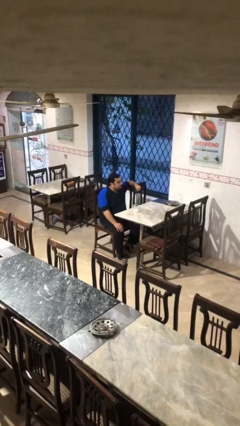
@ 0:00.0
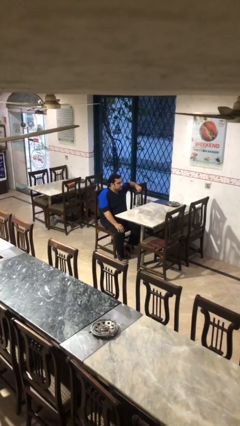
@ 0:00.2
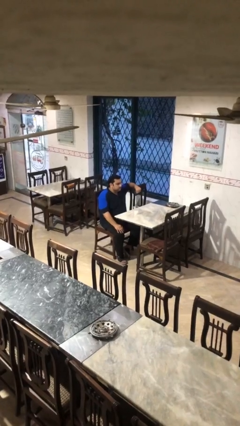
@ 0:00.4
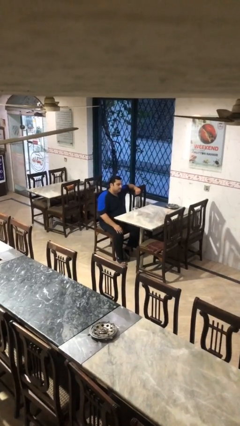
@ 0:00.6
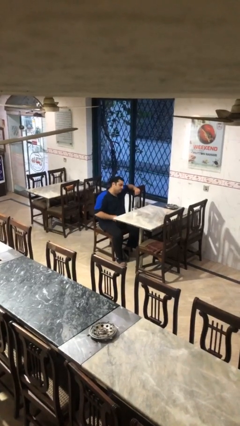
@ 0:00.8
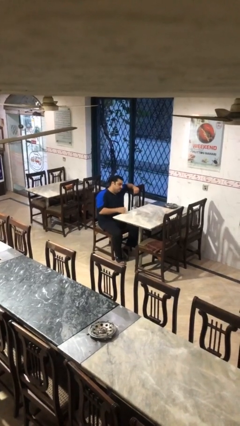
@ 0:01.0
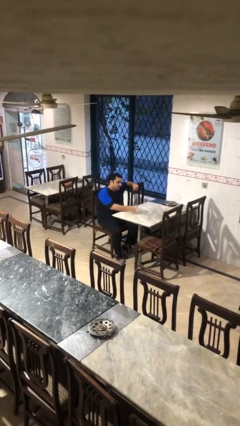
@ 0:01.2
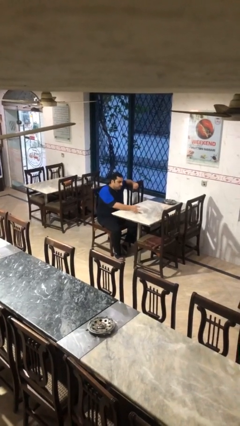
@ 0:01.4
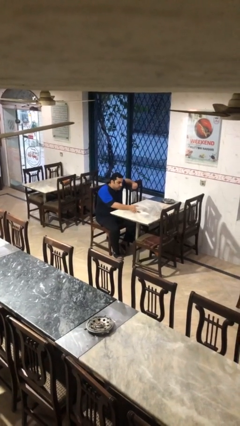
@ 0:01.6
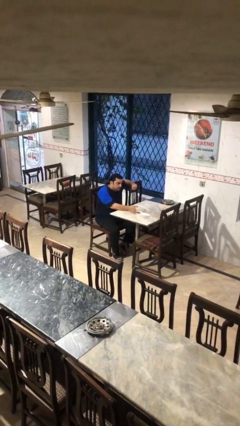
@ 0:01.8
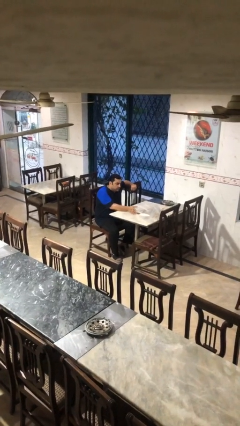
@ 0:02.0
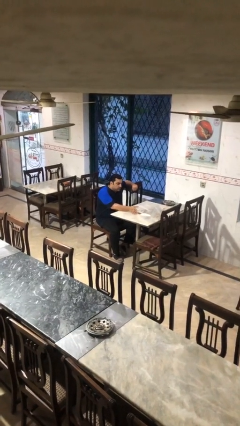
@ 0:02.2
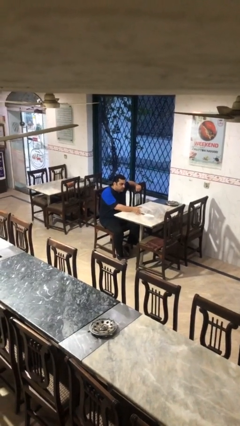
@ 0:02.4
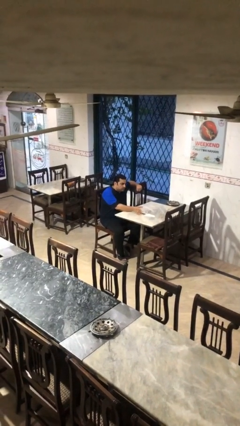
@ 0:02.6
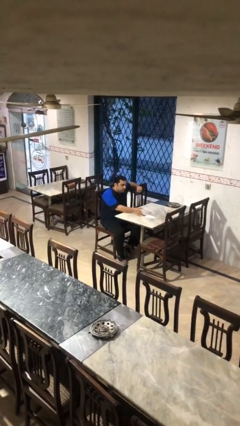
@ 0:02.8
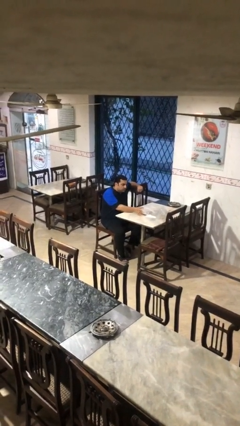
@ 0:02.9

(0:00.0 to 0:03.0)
person spills on table

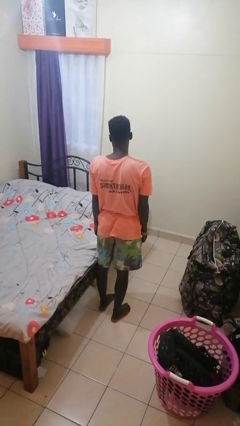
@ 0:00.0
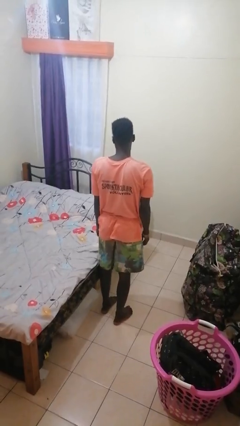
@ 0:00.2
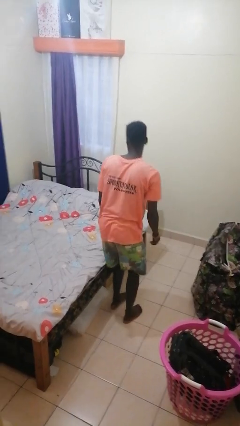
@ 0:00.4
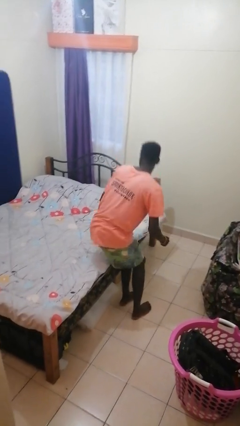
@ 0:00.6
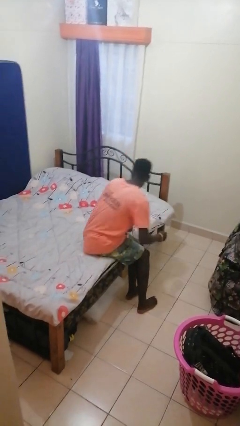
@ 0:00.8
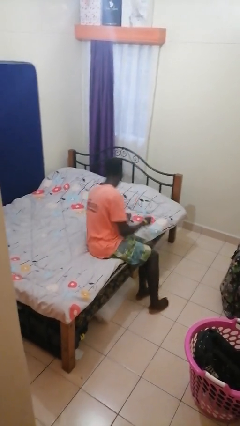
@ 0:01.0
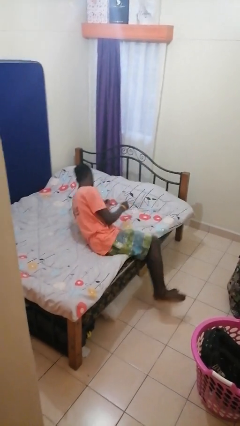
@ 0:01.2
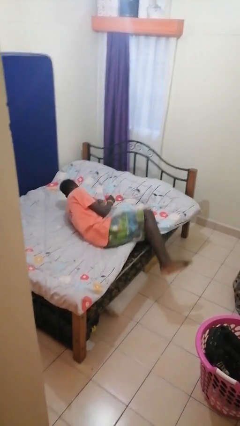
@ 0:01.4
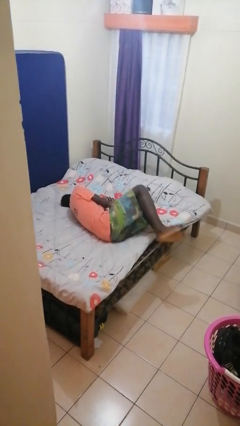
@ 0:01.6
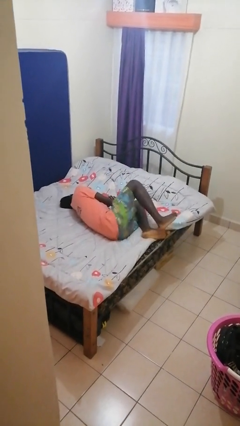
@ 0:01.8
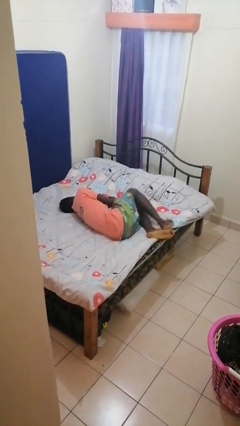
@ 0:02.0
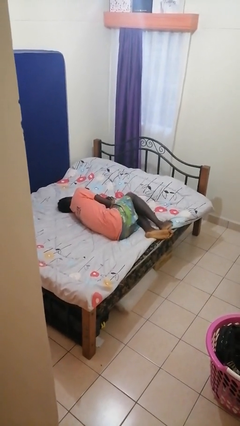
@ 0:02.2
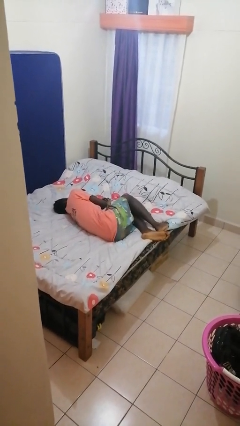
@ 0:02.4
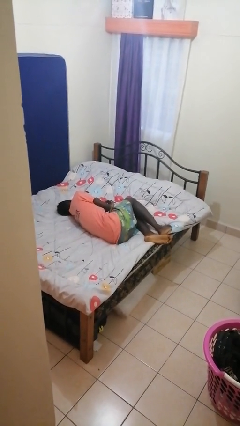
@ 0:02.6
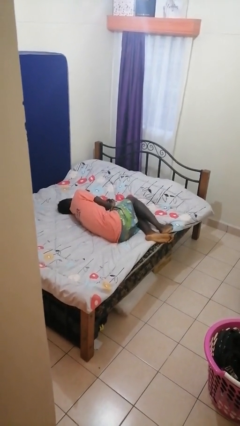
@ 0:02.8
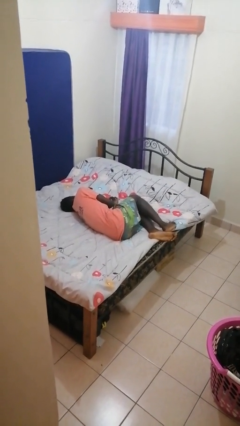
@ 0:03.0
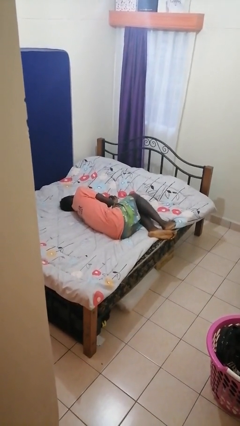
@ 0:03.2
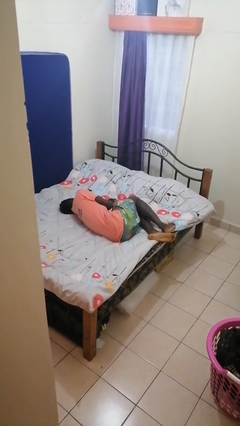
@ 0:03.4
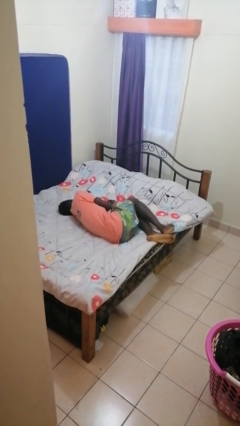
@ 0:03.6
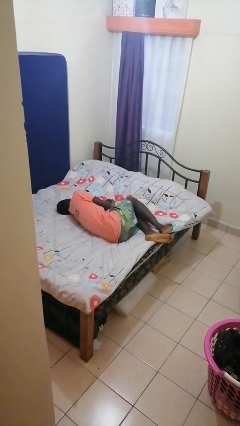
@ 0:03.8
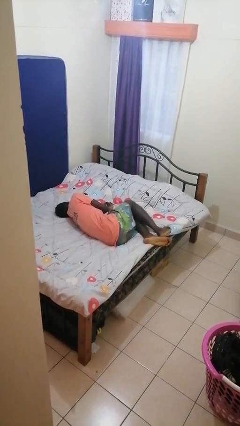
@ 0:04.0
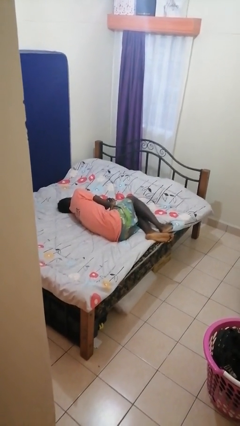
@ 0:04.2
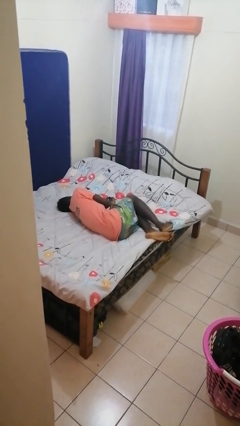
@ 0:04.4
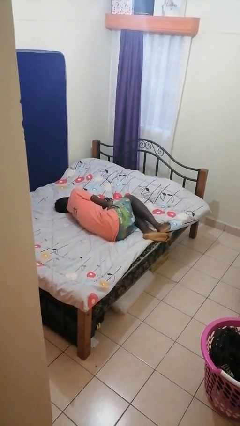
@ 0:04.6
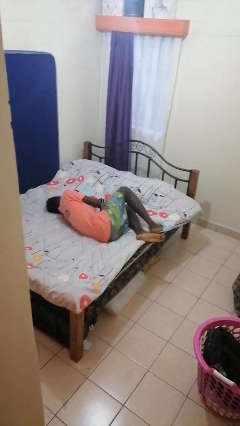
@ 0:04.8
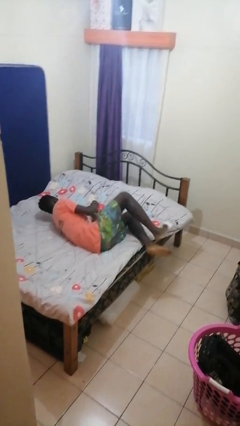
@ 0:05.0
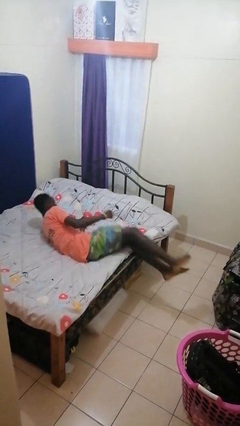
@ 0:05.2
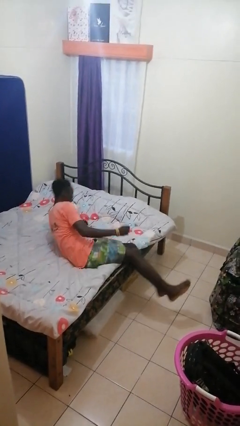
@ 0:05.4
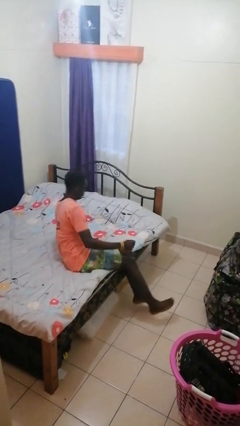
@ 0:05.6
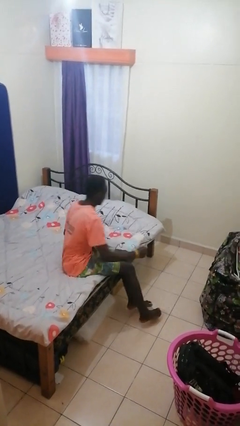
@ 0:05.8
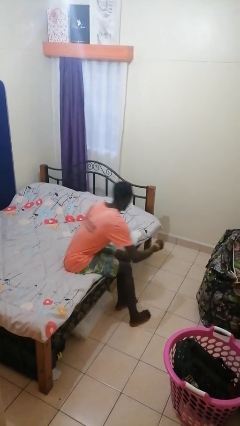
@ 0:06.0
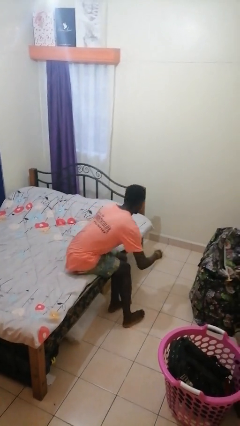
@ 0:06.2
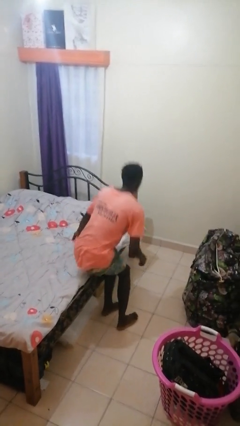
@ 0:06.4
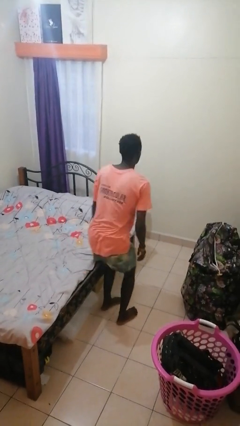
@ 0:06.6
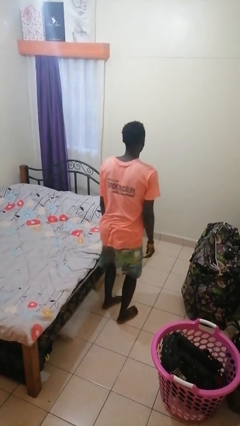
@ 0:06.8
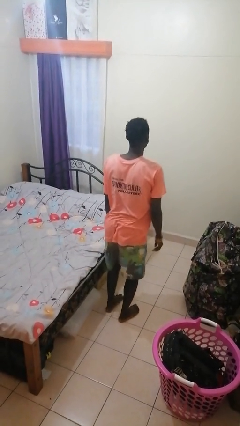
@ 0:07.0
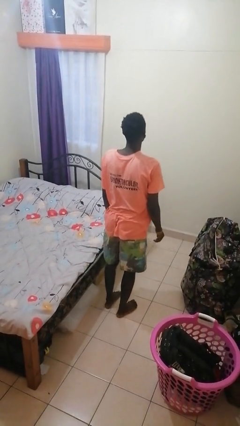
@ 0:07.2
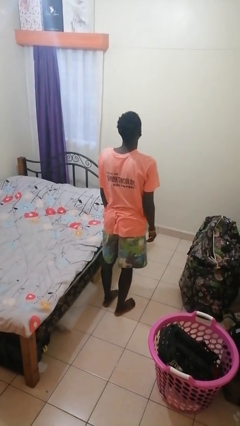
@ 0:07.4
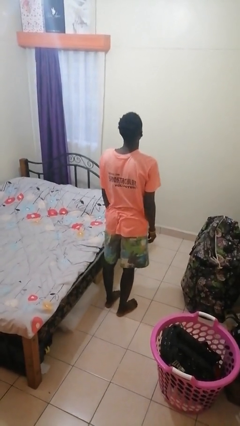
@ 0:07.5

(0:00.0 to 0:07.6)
person puts on shoes

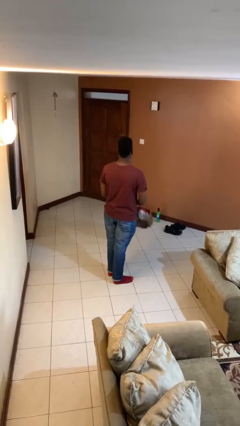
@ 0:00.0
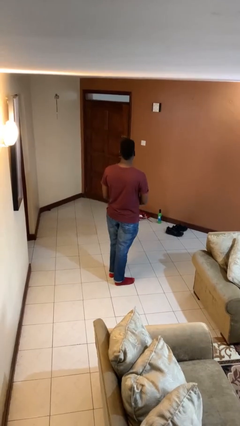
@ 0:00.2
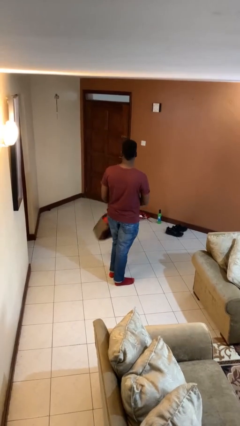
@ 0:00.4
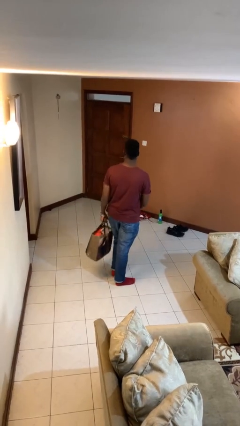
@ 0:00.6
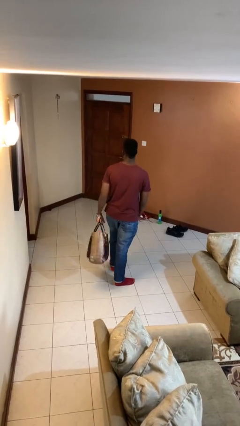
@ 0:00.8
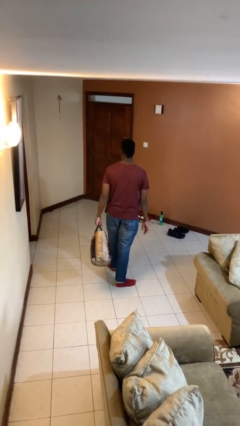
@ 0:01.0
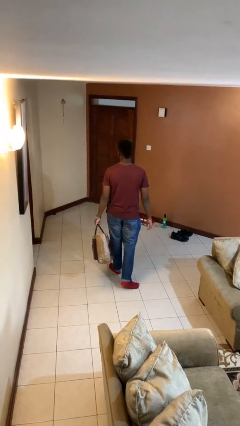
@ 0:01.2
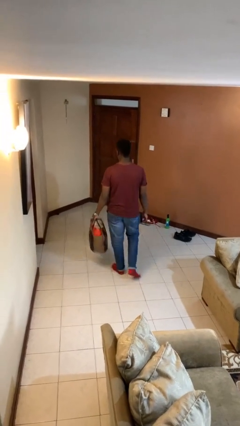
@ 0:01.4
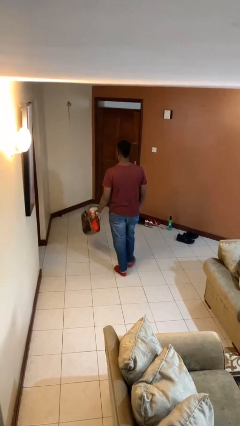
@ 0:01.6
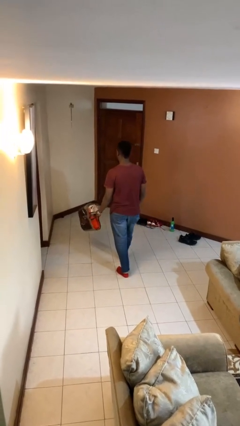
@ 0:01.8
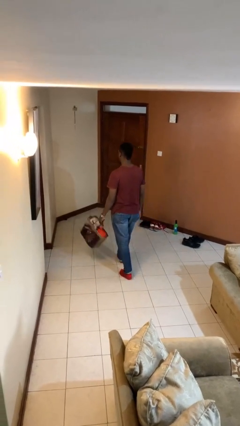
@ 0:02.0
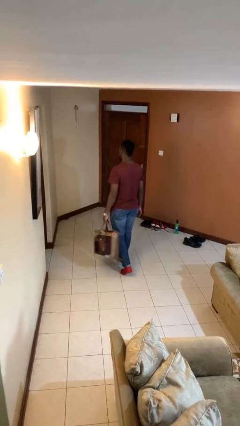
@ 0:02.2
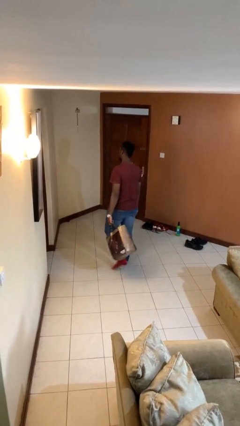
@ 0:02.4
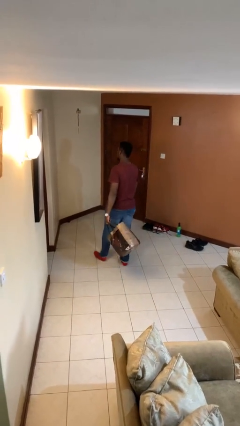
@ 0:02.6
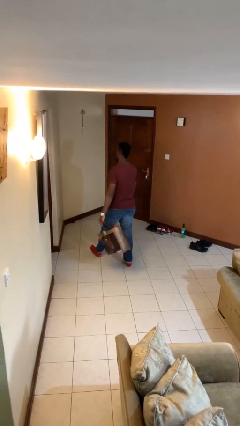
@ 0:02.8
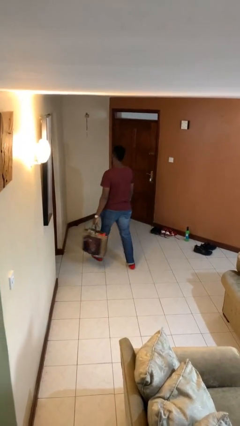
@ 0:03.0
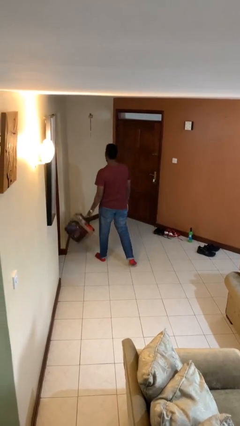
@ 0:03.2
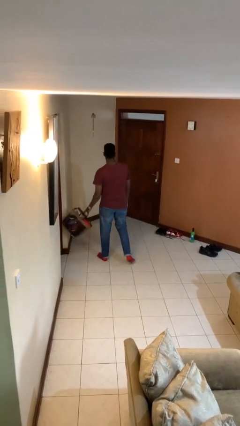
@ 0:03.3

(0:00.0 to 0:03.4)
person carries groceries

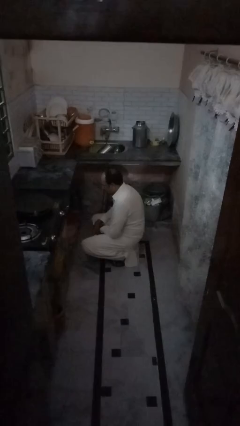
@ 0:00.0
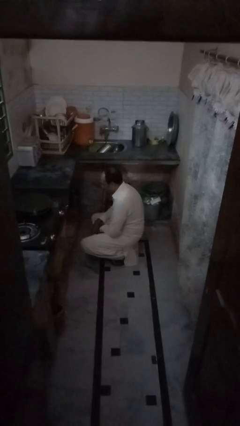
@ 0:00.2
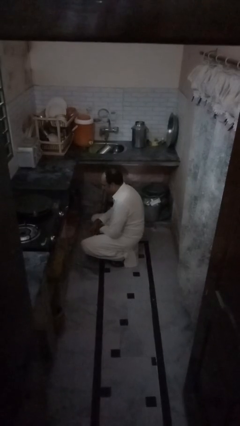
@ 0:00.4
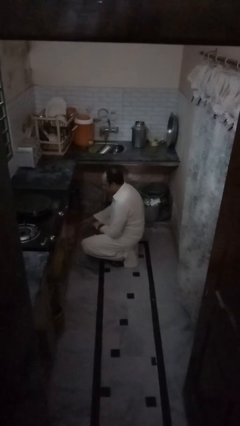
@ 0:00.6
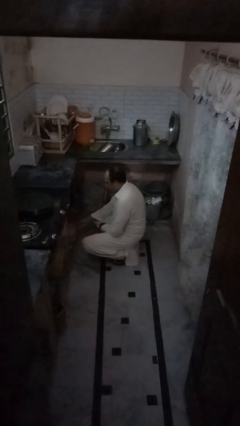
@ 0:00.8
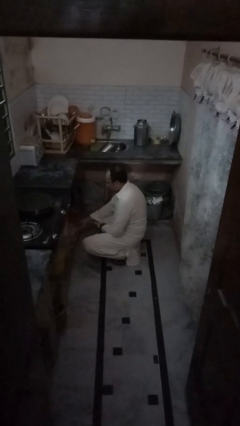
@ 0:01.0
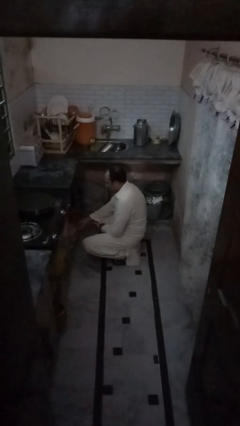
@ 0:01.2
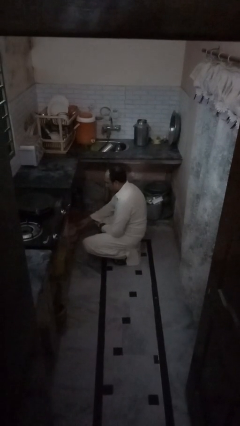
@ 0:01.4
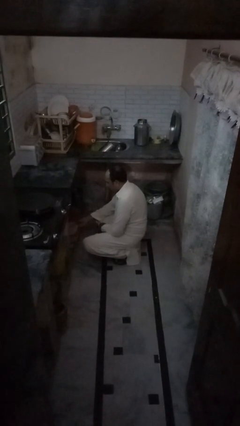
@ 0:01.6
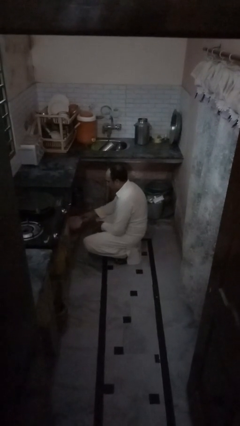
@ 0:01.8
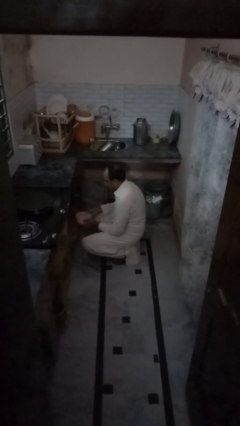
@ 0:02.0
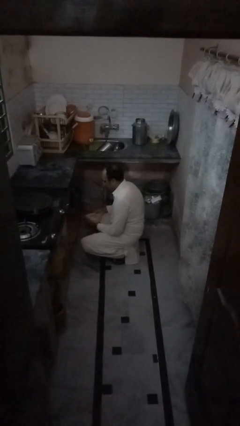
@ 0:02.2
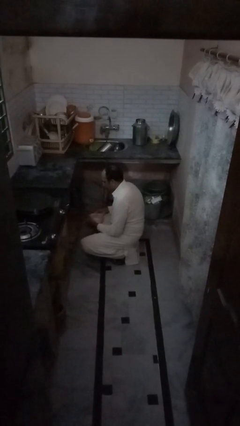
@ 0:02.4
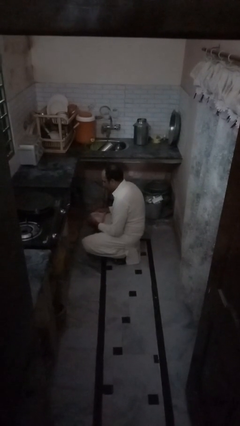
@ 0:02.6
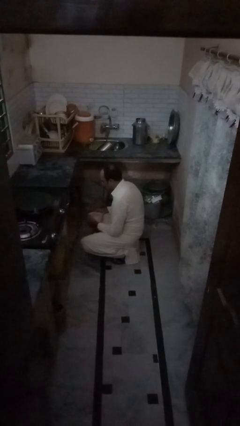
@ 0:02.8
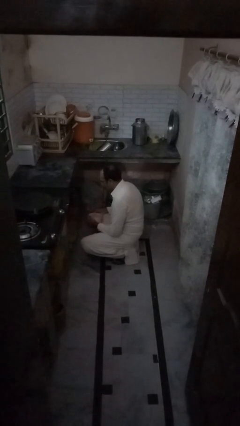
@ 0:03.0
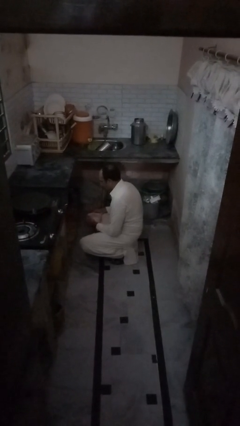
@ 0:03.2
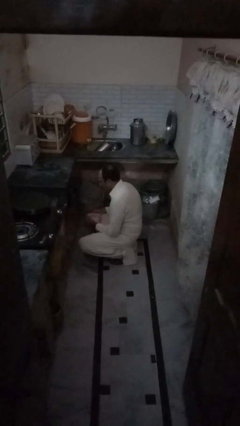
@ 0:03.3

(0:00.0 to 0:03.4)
person picks up object from cabinet

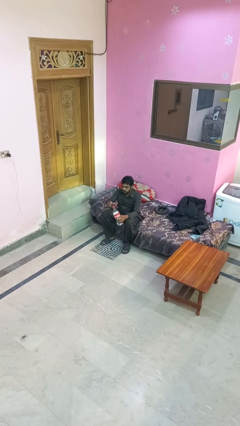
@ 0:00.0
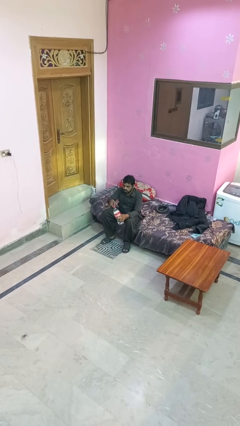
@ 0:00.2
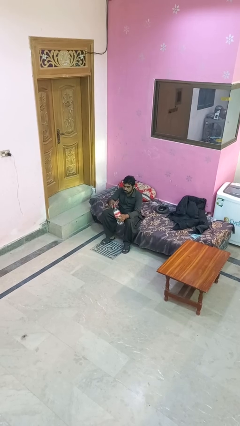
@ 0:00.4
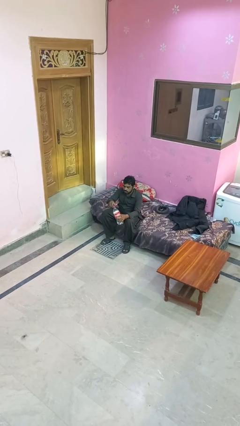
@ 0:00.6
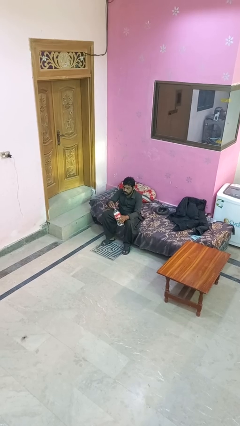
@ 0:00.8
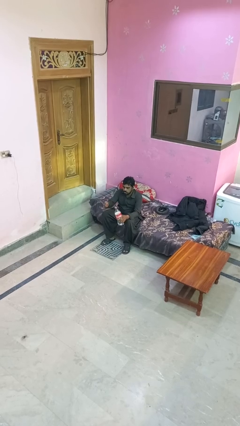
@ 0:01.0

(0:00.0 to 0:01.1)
person unscrews lid from bottle
